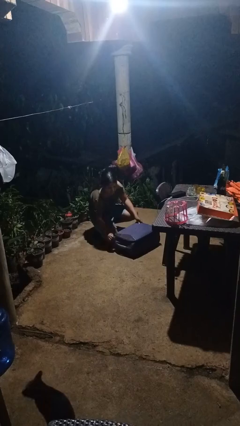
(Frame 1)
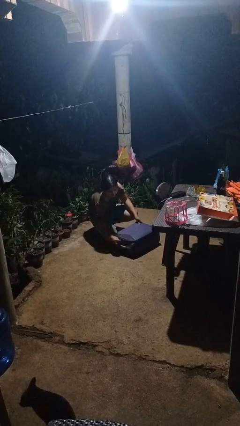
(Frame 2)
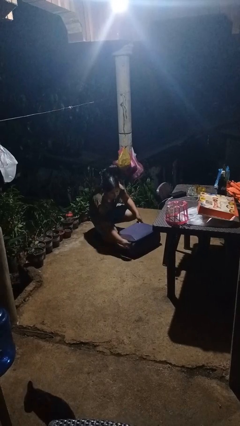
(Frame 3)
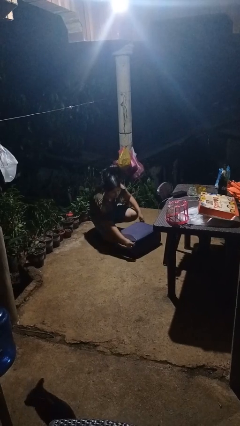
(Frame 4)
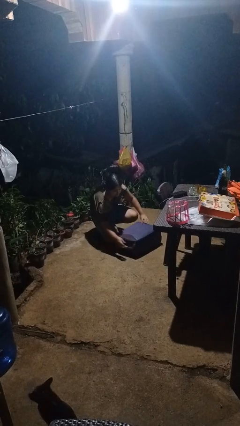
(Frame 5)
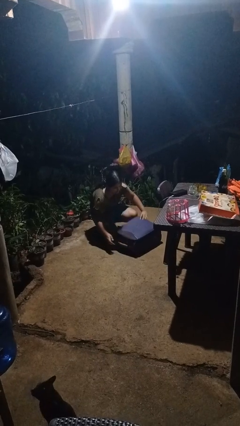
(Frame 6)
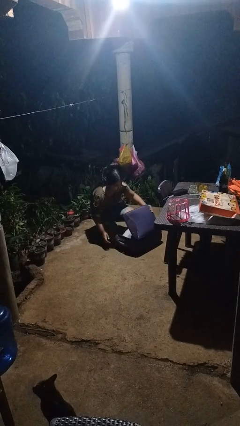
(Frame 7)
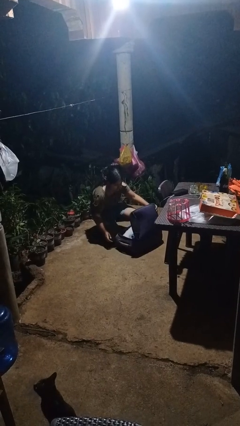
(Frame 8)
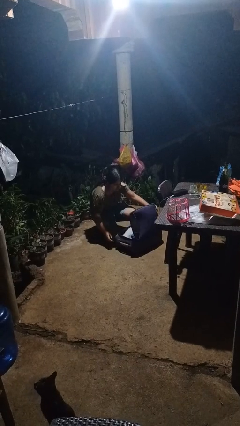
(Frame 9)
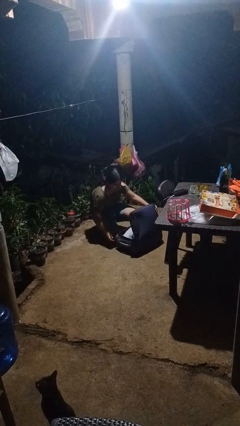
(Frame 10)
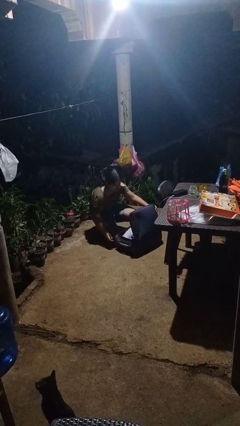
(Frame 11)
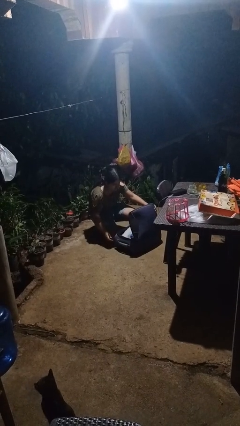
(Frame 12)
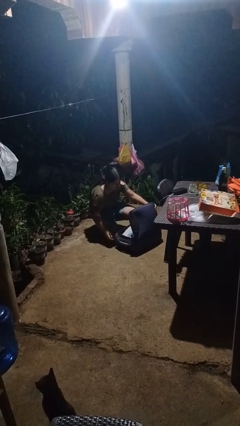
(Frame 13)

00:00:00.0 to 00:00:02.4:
person opens suitcase

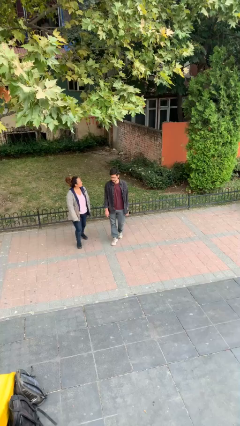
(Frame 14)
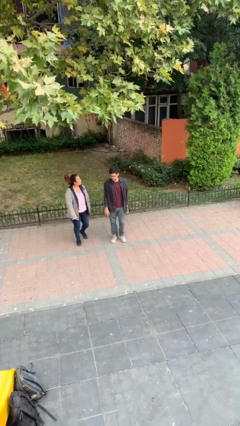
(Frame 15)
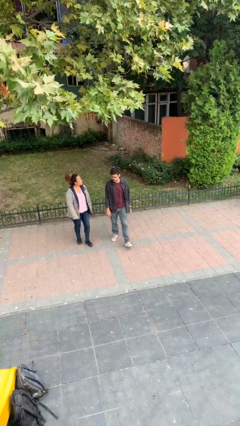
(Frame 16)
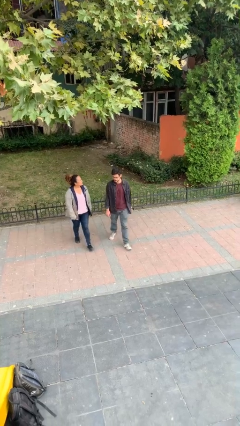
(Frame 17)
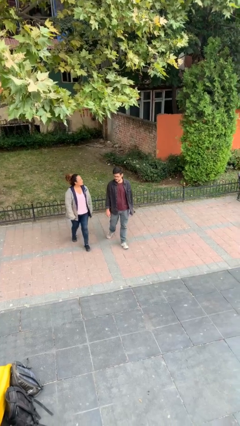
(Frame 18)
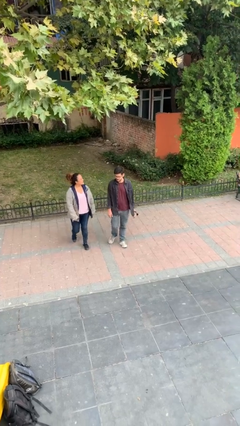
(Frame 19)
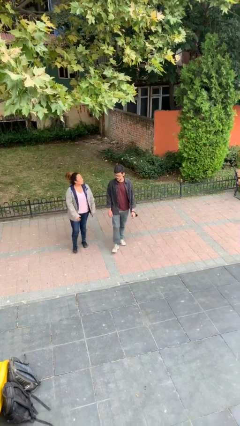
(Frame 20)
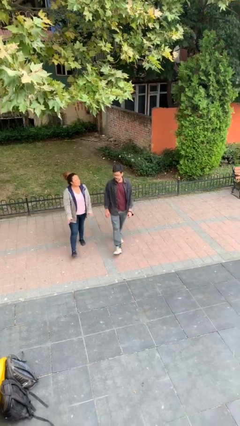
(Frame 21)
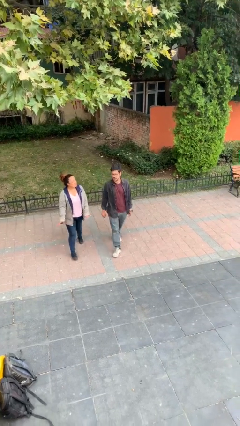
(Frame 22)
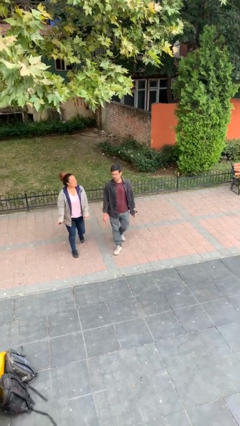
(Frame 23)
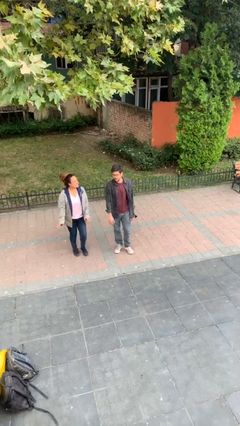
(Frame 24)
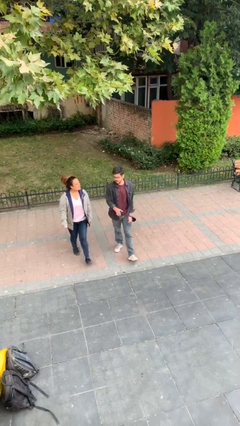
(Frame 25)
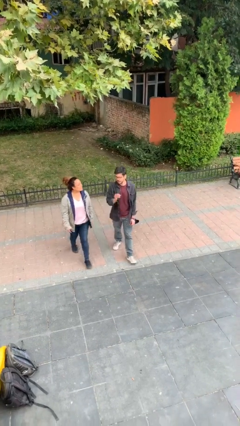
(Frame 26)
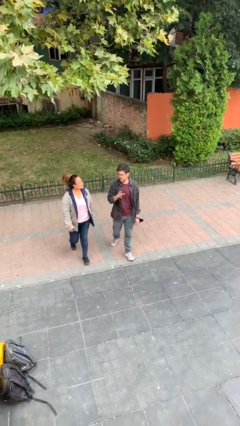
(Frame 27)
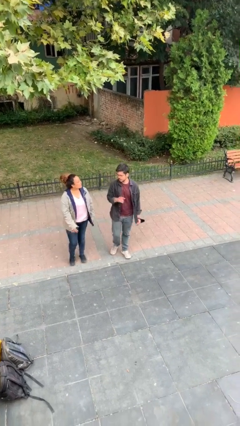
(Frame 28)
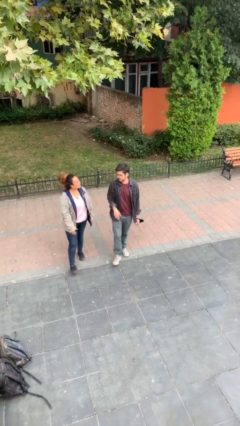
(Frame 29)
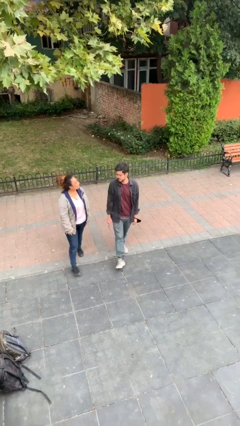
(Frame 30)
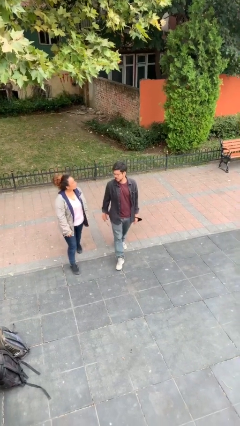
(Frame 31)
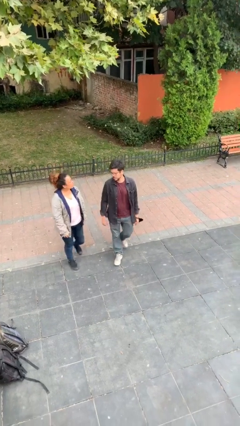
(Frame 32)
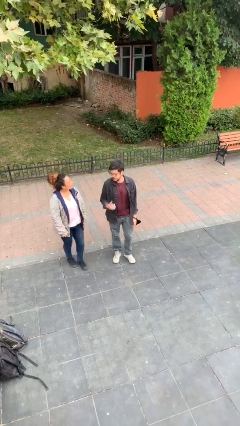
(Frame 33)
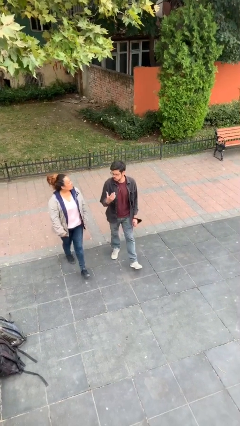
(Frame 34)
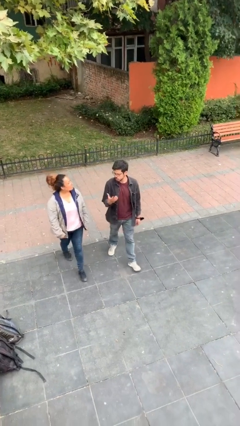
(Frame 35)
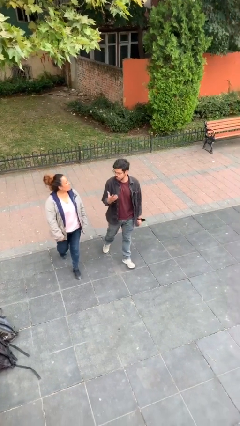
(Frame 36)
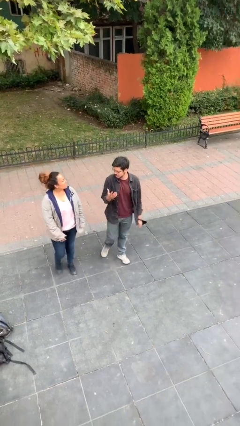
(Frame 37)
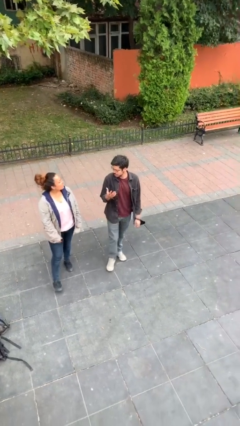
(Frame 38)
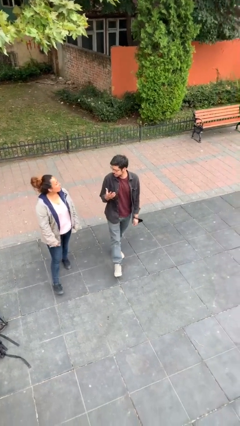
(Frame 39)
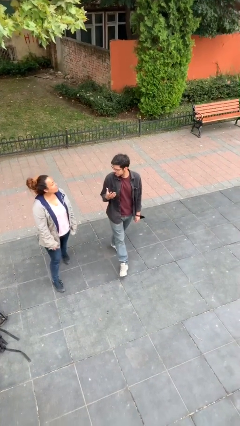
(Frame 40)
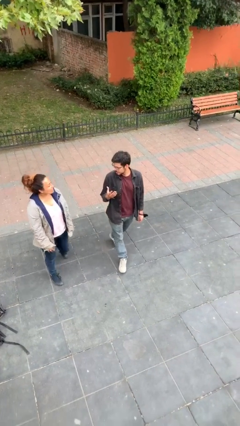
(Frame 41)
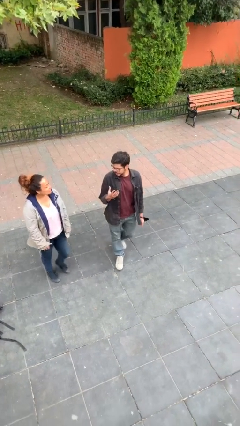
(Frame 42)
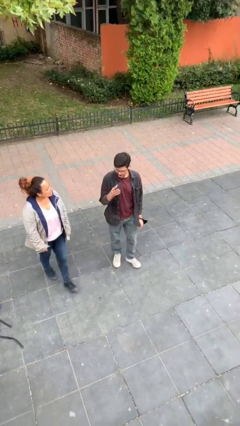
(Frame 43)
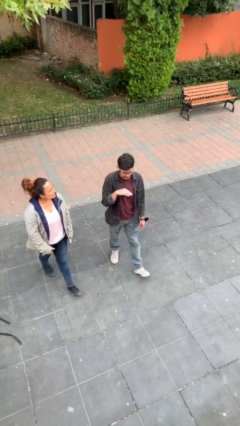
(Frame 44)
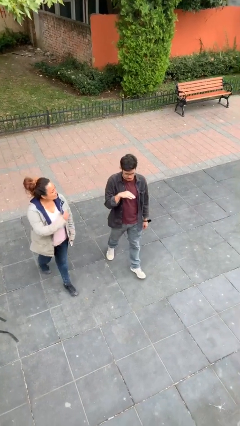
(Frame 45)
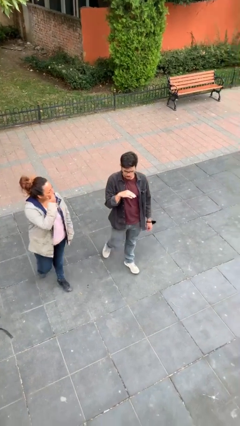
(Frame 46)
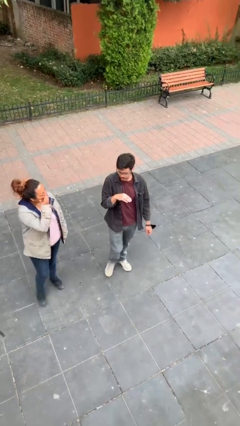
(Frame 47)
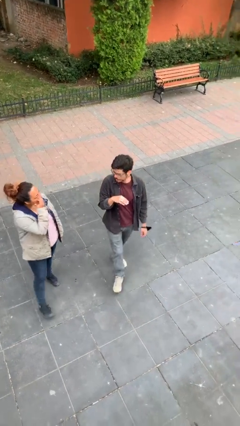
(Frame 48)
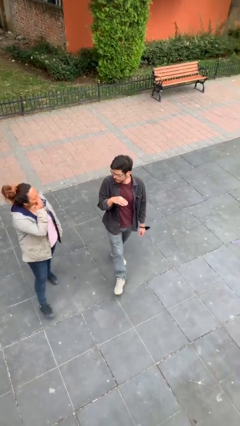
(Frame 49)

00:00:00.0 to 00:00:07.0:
person talks to person

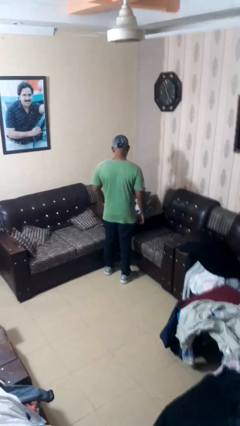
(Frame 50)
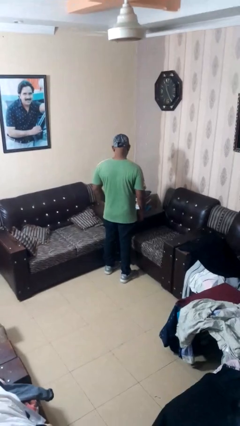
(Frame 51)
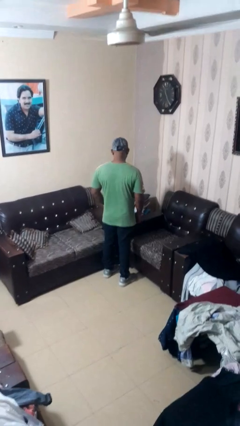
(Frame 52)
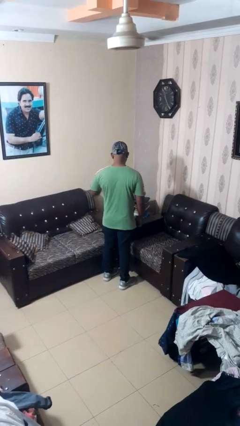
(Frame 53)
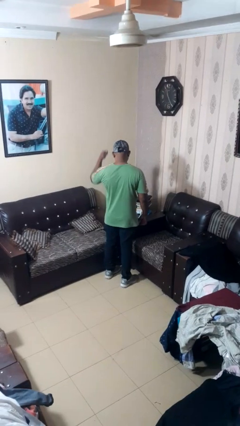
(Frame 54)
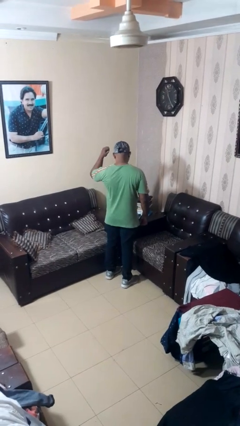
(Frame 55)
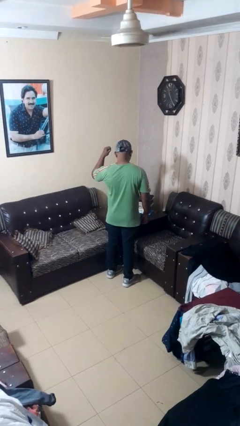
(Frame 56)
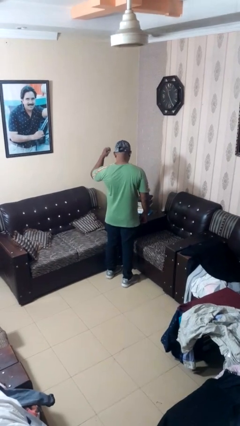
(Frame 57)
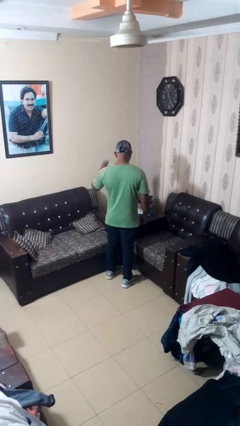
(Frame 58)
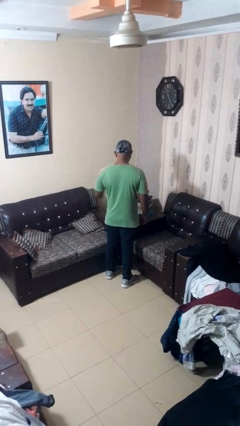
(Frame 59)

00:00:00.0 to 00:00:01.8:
person gestures behind me

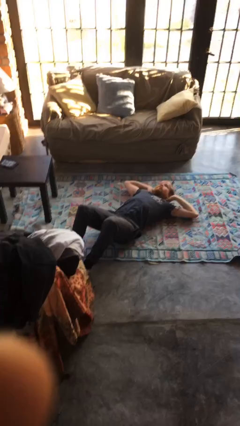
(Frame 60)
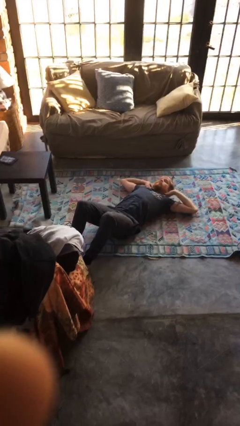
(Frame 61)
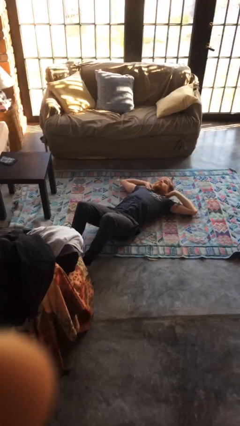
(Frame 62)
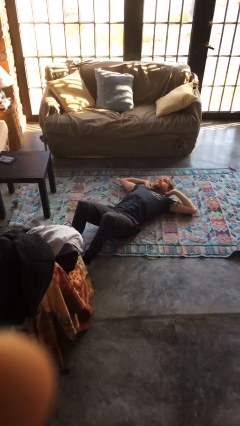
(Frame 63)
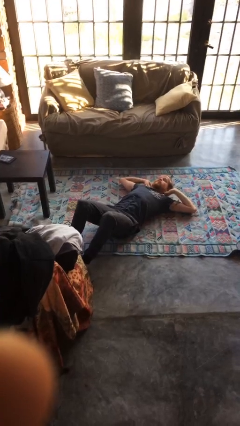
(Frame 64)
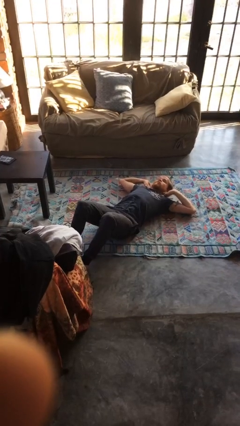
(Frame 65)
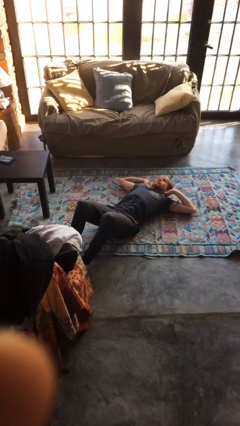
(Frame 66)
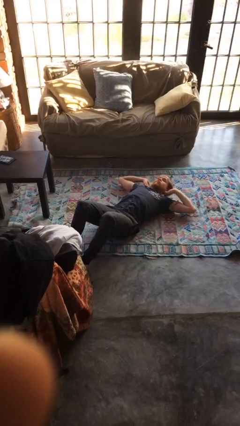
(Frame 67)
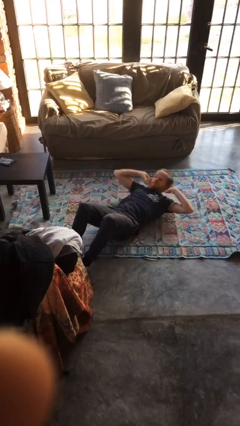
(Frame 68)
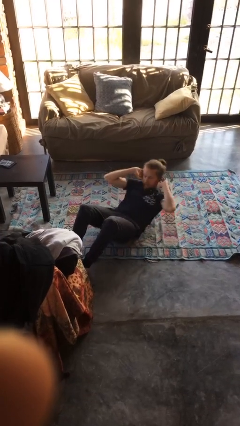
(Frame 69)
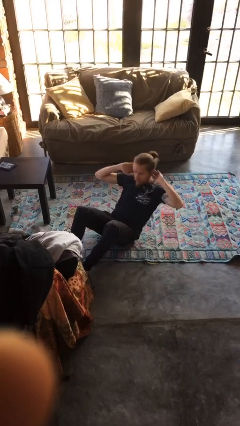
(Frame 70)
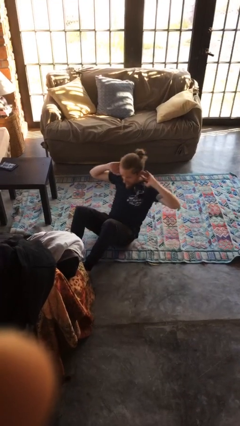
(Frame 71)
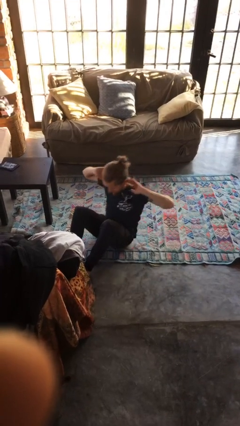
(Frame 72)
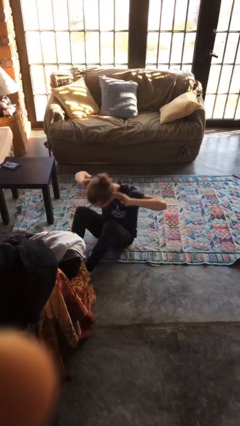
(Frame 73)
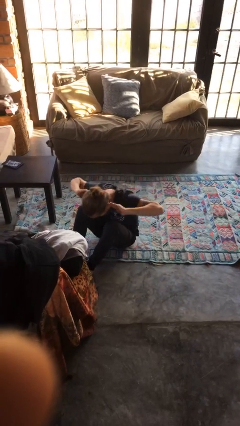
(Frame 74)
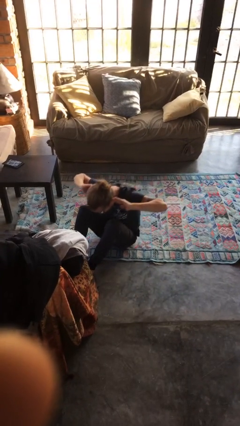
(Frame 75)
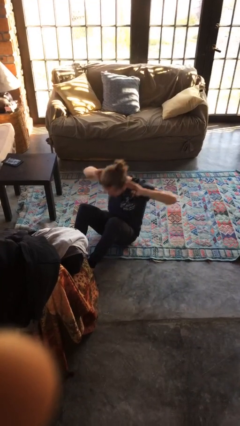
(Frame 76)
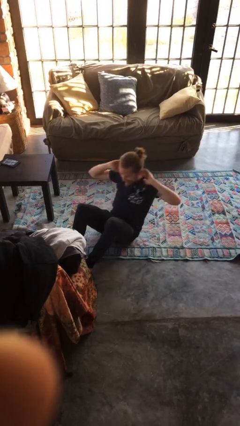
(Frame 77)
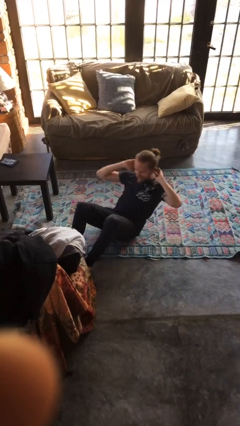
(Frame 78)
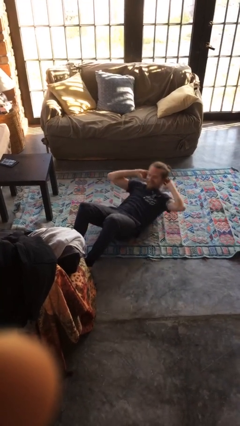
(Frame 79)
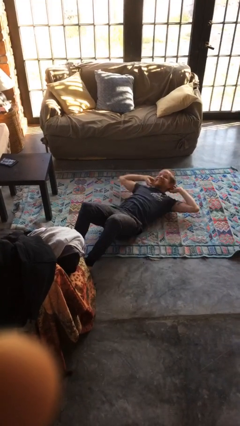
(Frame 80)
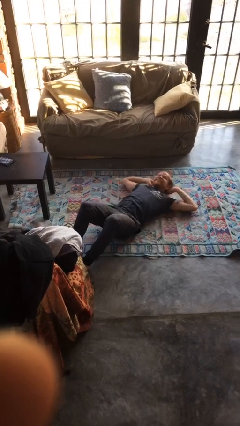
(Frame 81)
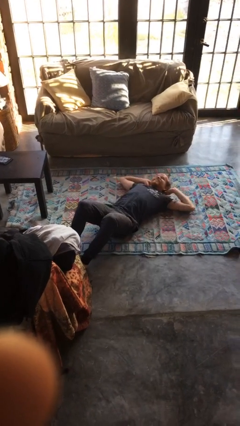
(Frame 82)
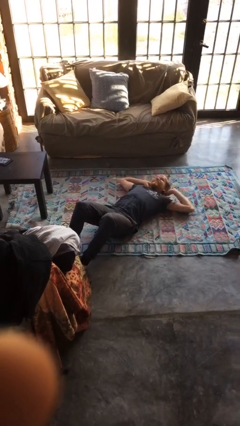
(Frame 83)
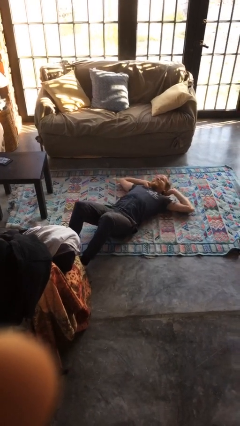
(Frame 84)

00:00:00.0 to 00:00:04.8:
person exercises with situp

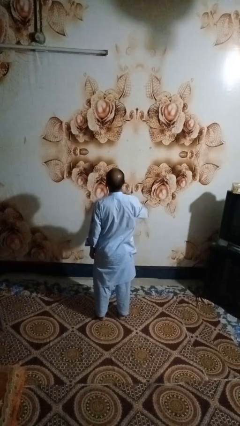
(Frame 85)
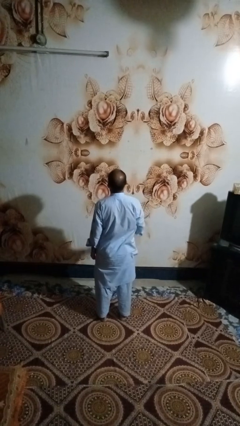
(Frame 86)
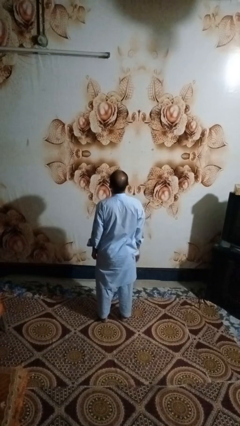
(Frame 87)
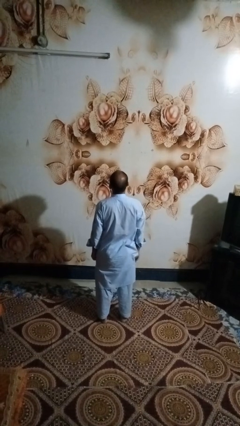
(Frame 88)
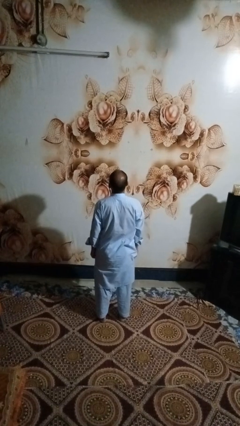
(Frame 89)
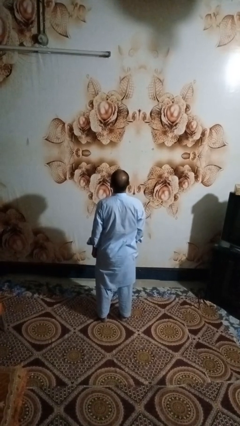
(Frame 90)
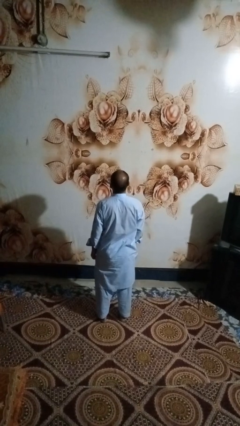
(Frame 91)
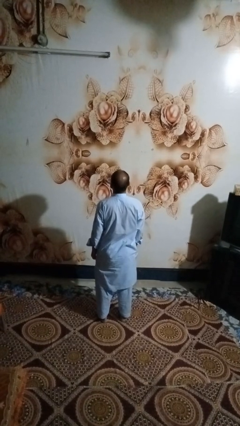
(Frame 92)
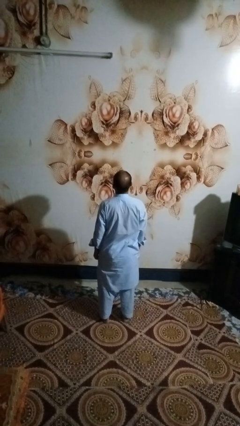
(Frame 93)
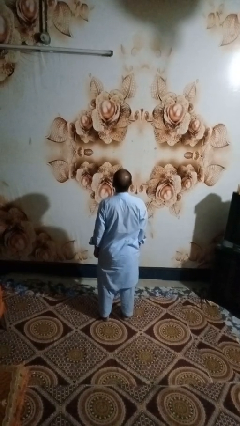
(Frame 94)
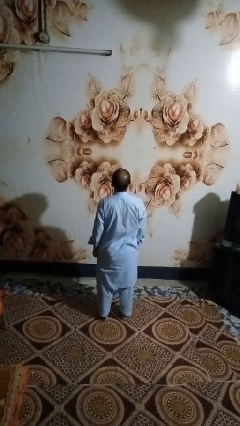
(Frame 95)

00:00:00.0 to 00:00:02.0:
person gestures lower hand
